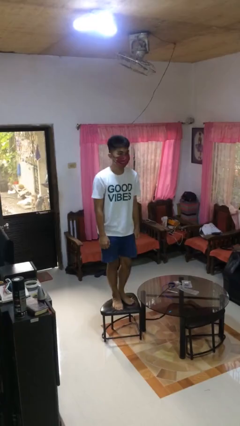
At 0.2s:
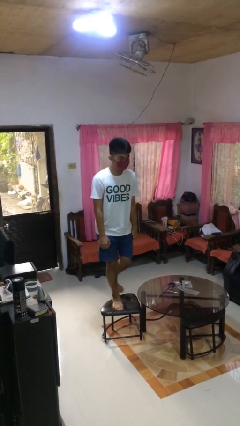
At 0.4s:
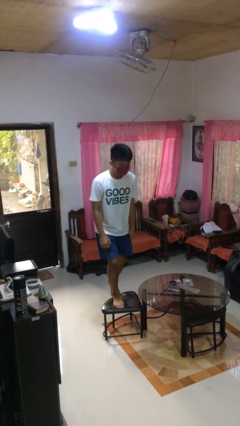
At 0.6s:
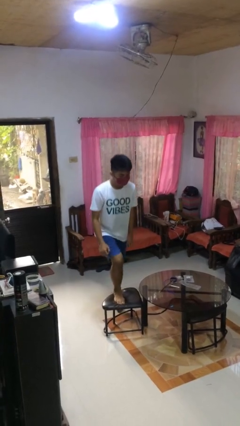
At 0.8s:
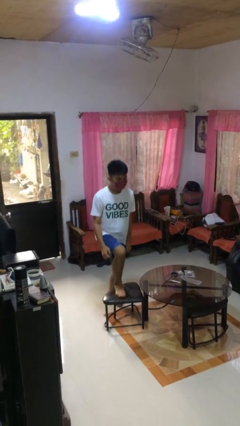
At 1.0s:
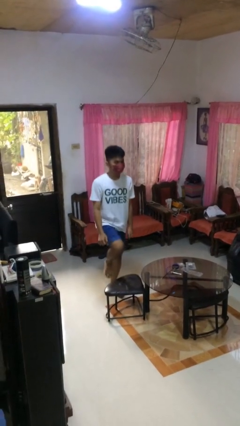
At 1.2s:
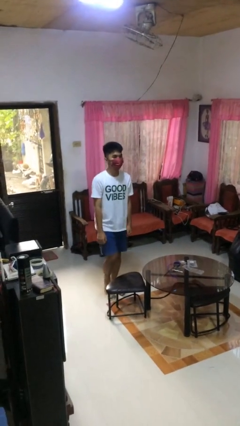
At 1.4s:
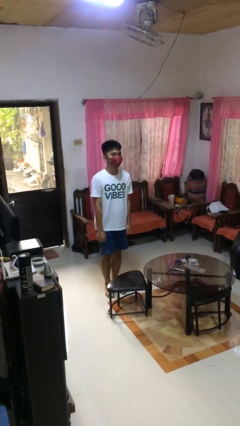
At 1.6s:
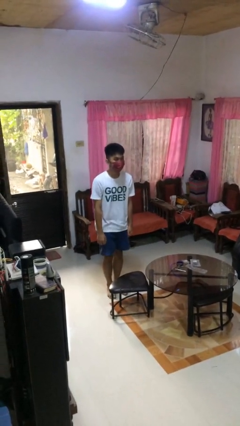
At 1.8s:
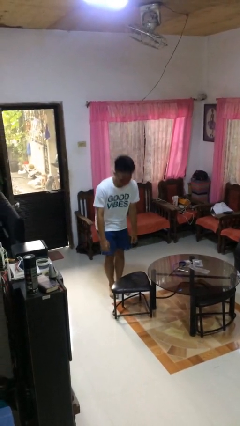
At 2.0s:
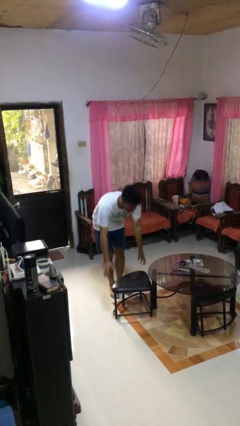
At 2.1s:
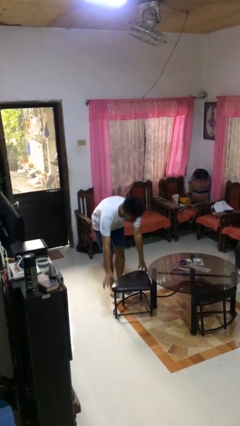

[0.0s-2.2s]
person climbs off chair

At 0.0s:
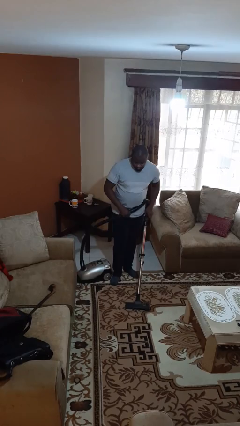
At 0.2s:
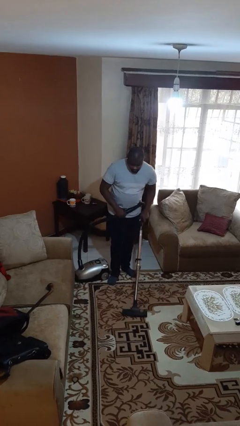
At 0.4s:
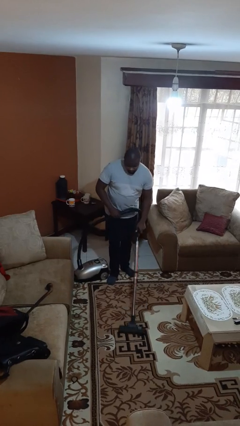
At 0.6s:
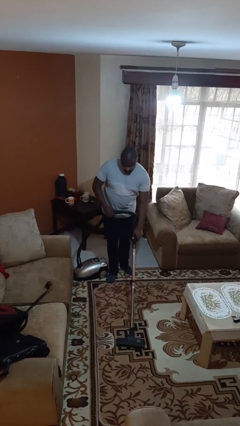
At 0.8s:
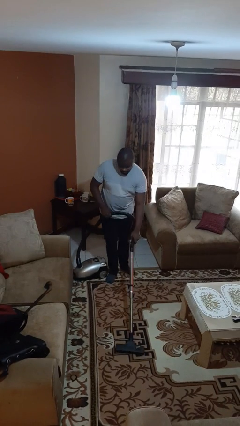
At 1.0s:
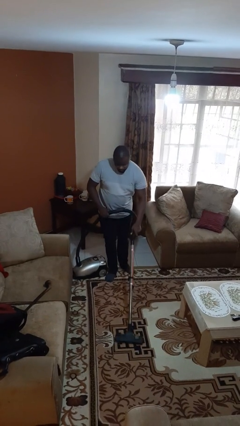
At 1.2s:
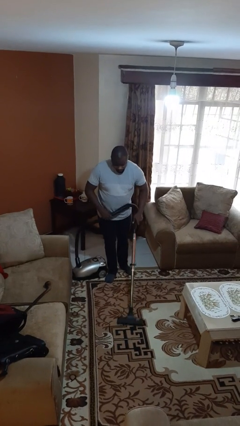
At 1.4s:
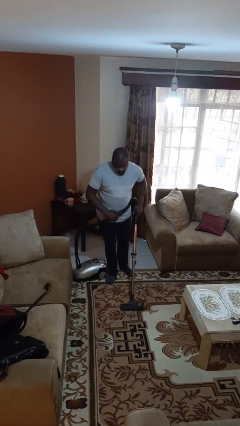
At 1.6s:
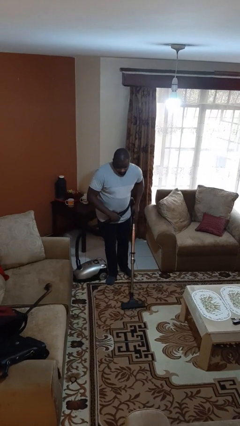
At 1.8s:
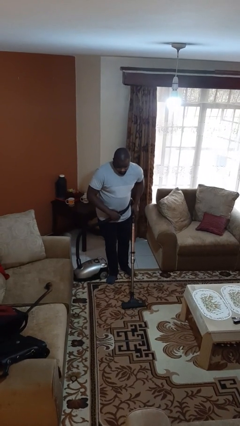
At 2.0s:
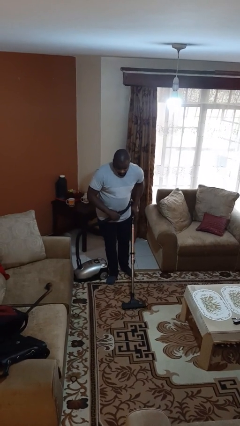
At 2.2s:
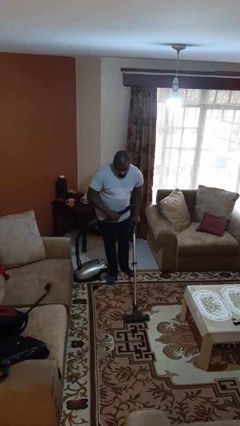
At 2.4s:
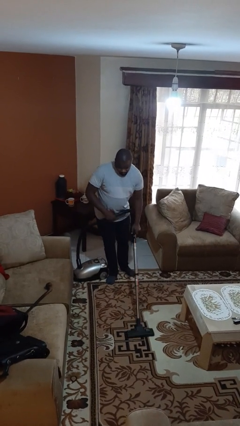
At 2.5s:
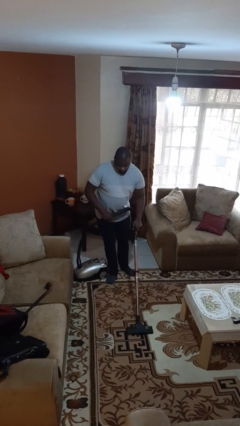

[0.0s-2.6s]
person vacuums carpet

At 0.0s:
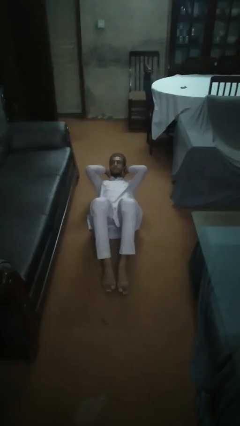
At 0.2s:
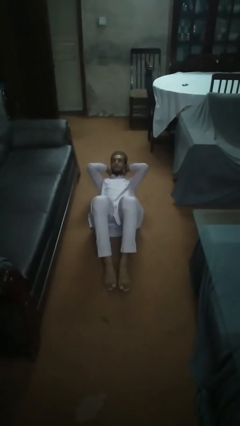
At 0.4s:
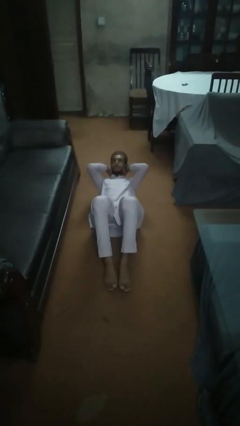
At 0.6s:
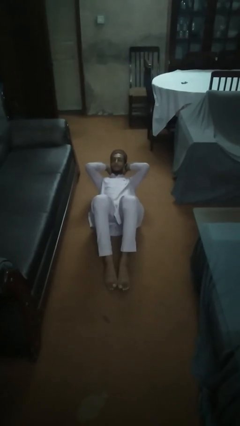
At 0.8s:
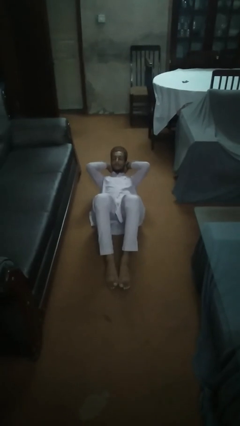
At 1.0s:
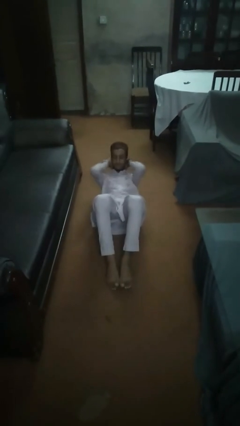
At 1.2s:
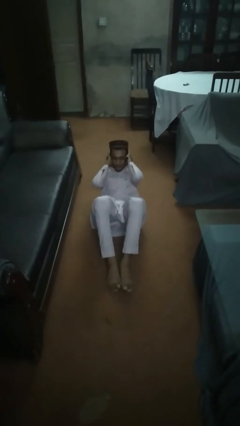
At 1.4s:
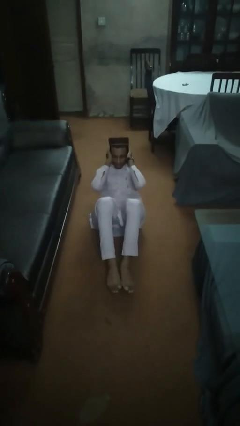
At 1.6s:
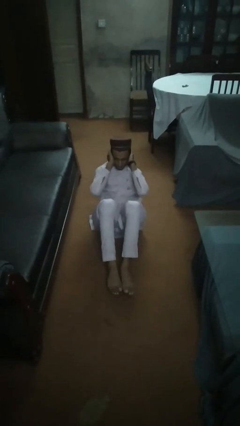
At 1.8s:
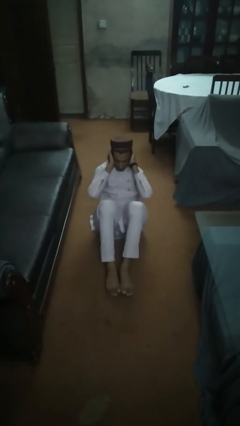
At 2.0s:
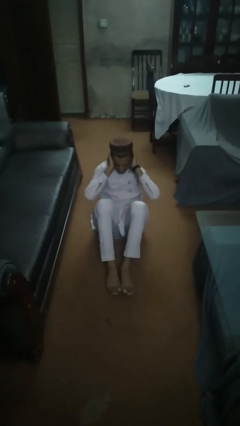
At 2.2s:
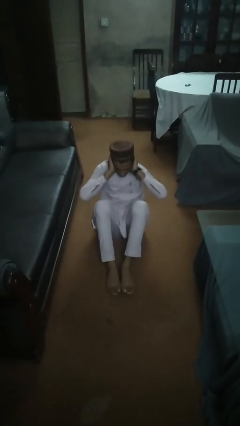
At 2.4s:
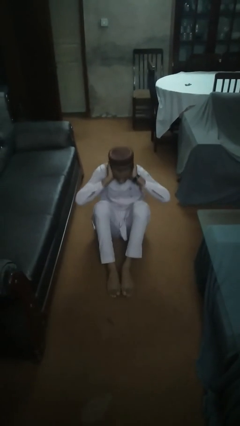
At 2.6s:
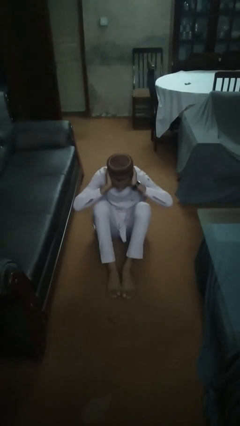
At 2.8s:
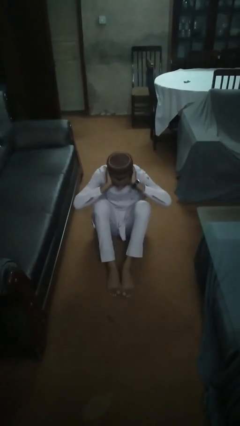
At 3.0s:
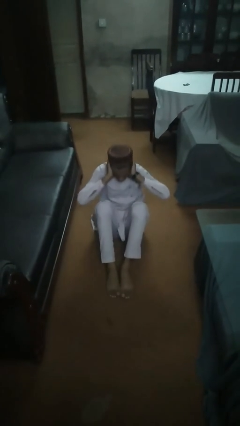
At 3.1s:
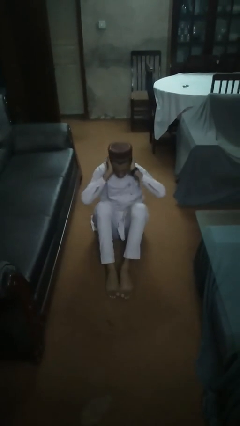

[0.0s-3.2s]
person exercises with situp

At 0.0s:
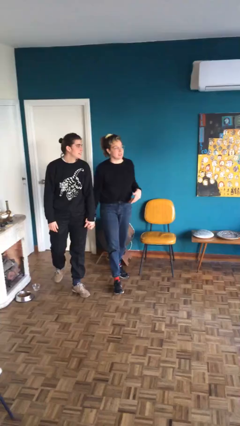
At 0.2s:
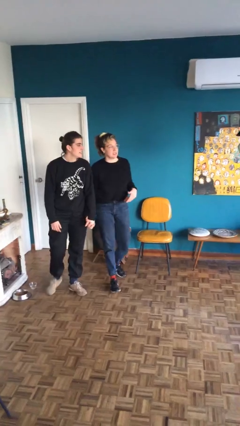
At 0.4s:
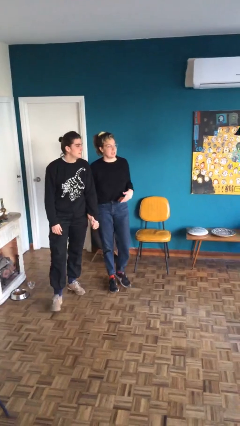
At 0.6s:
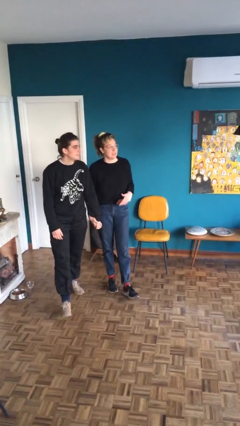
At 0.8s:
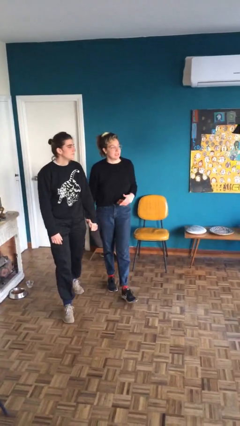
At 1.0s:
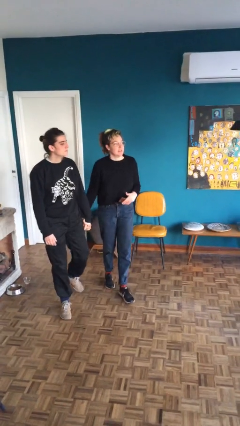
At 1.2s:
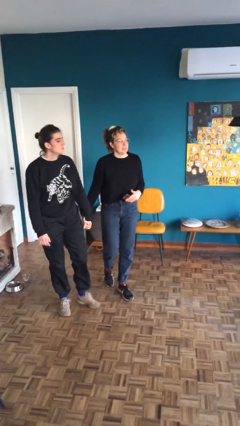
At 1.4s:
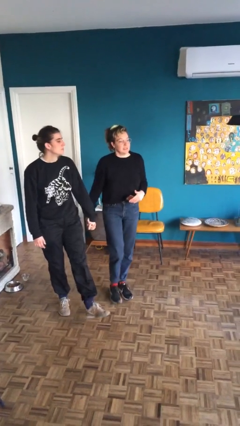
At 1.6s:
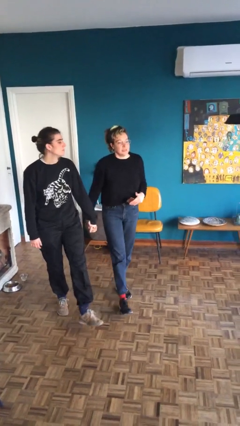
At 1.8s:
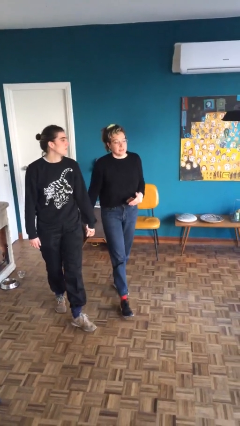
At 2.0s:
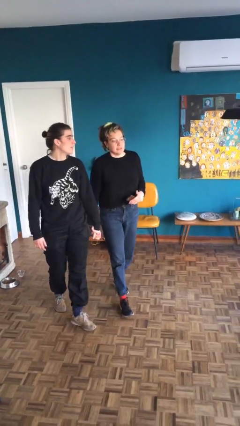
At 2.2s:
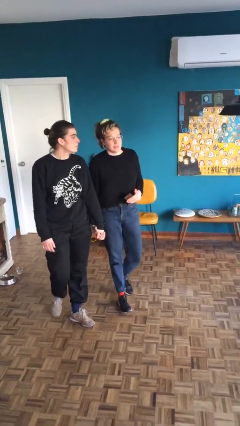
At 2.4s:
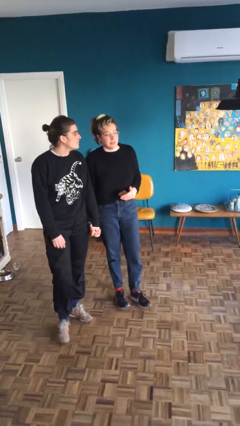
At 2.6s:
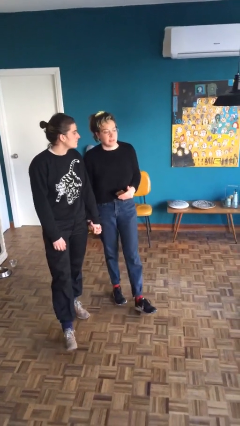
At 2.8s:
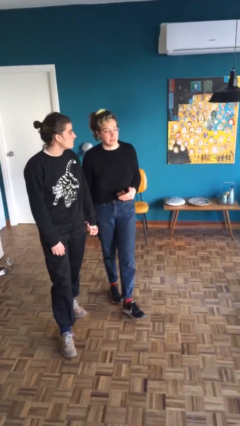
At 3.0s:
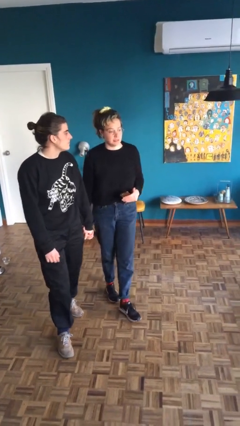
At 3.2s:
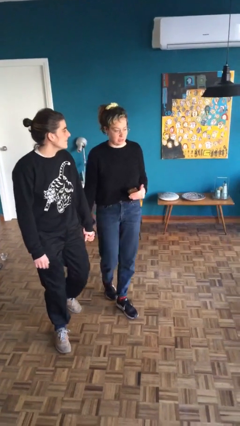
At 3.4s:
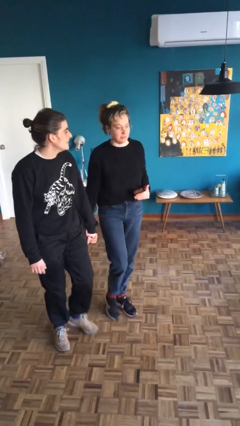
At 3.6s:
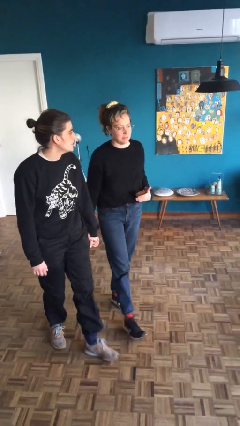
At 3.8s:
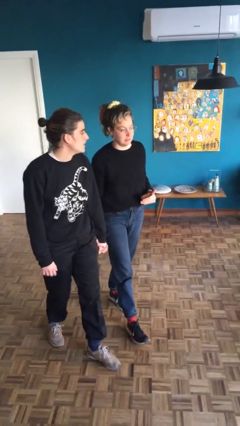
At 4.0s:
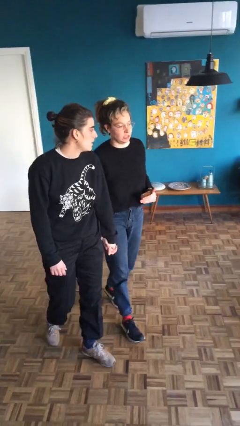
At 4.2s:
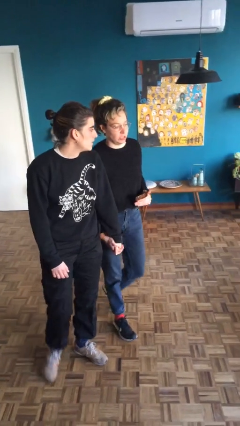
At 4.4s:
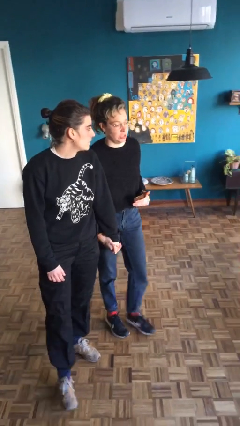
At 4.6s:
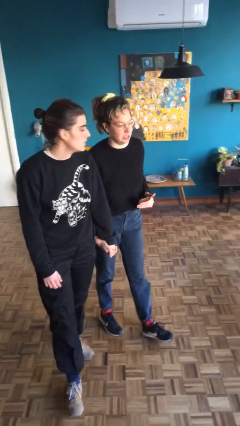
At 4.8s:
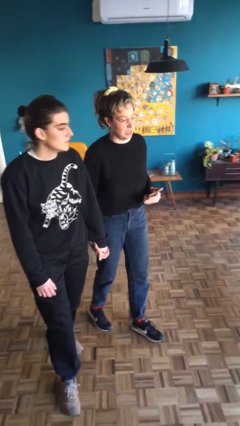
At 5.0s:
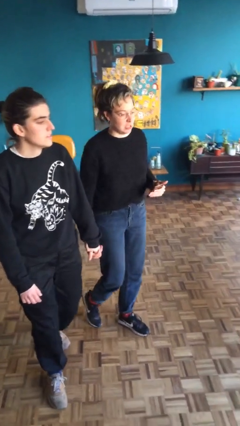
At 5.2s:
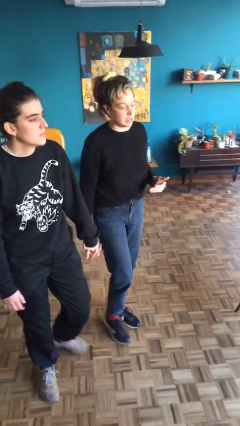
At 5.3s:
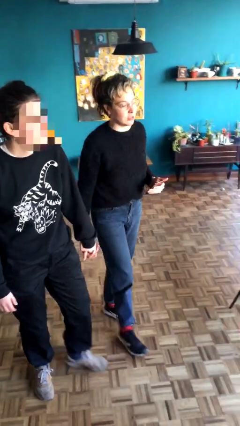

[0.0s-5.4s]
person holds hand

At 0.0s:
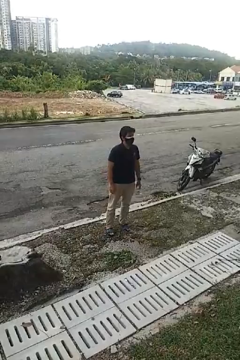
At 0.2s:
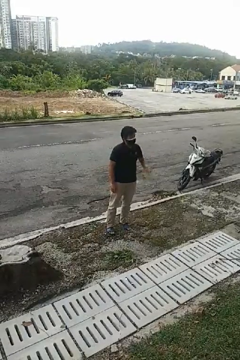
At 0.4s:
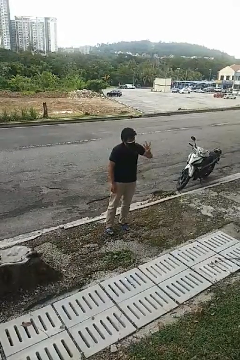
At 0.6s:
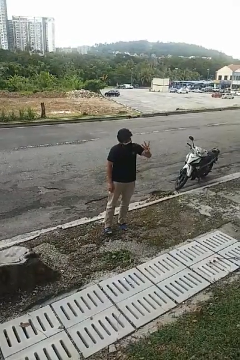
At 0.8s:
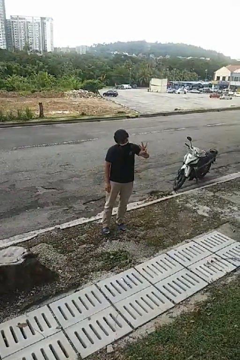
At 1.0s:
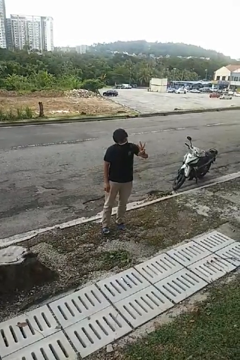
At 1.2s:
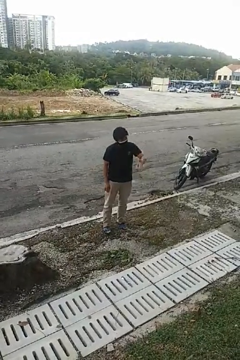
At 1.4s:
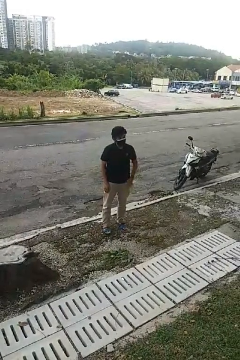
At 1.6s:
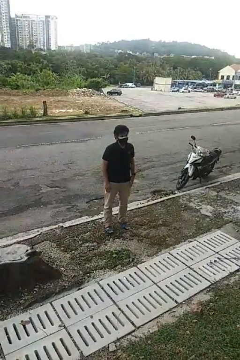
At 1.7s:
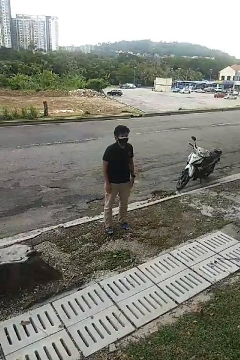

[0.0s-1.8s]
person gestures number three

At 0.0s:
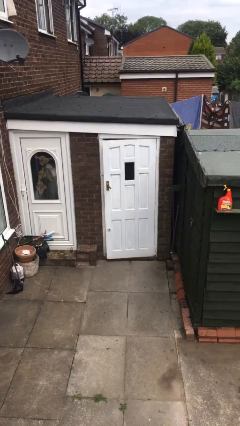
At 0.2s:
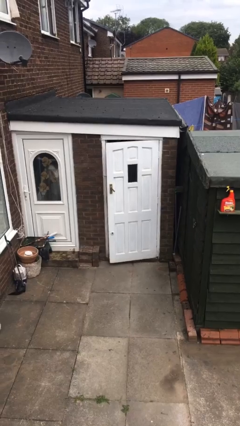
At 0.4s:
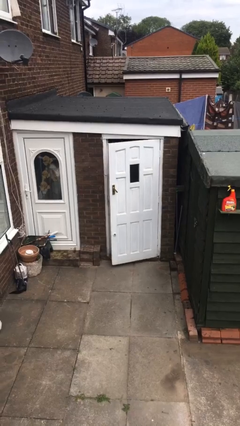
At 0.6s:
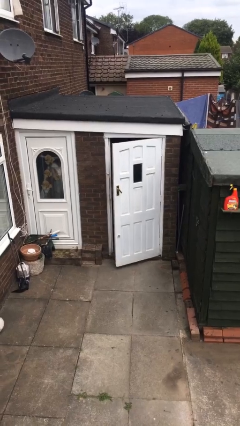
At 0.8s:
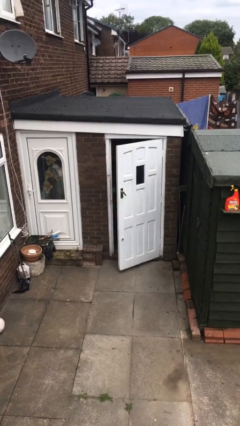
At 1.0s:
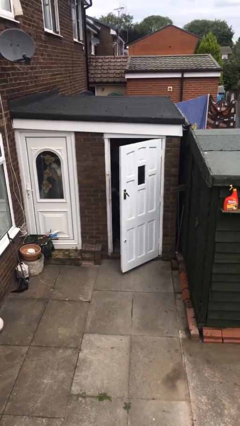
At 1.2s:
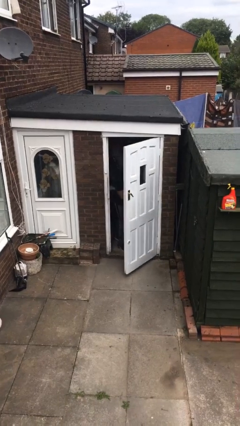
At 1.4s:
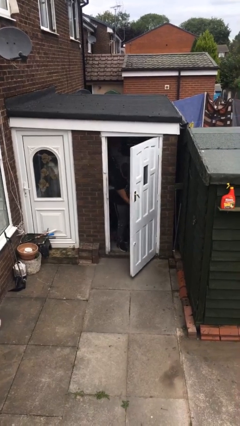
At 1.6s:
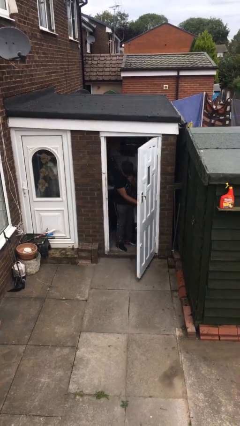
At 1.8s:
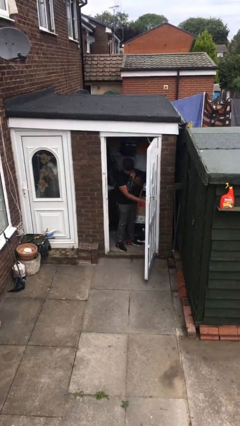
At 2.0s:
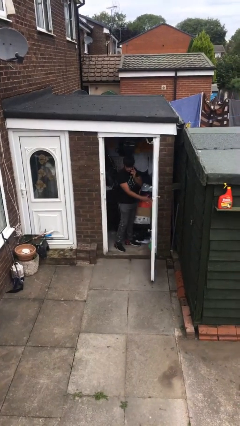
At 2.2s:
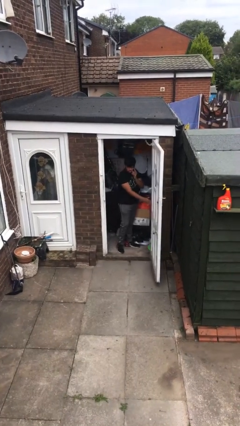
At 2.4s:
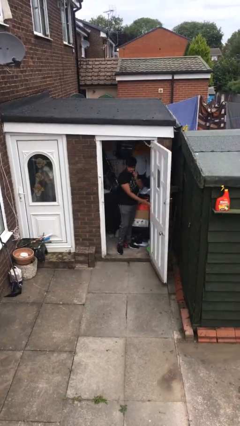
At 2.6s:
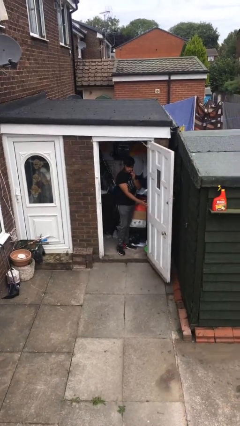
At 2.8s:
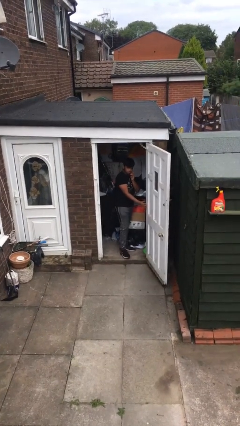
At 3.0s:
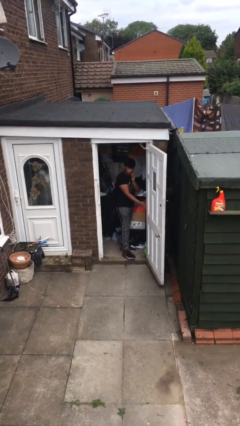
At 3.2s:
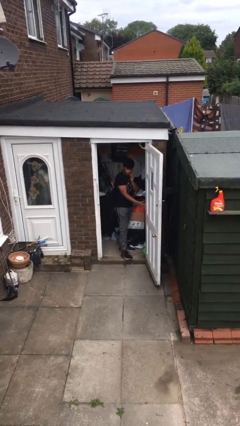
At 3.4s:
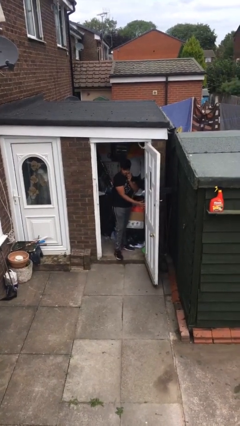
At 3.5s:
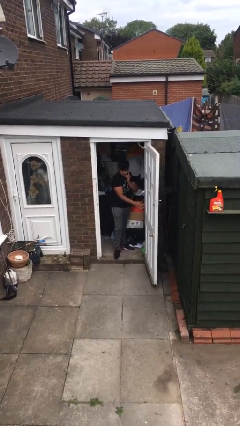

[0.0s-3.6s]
person opens facility door
